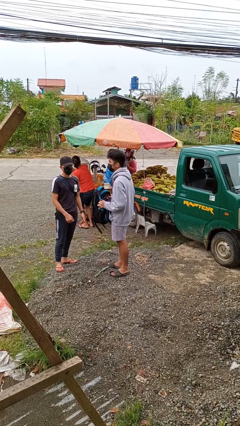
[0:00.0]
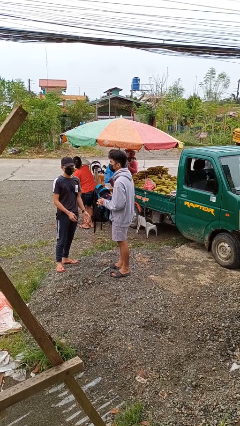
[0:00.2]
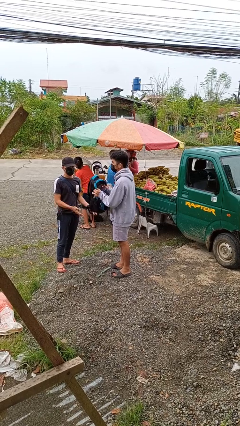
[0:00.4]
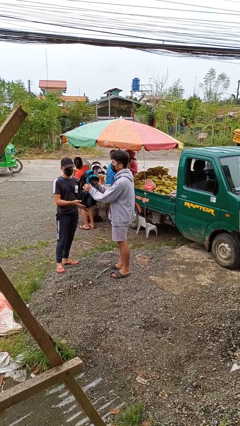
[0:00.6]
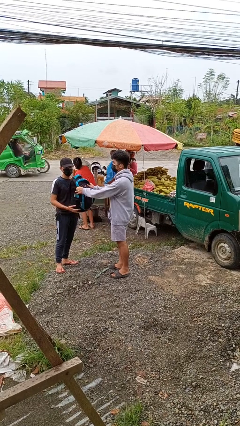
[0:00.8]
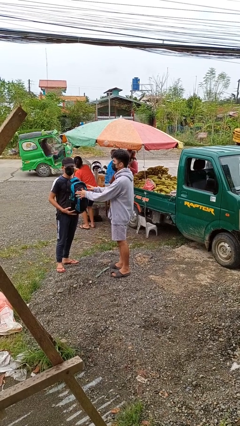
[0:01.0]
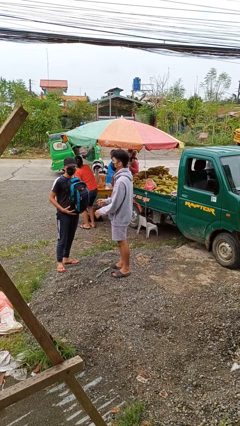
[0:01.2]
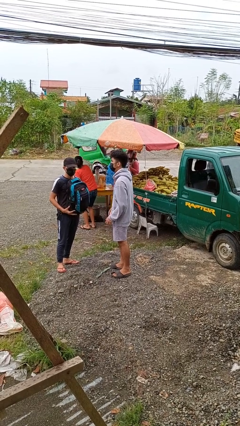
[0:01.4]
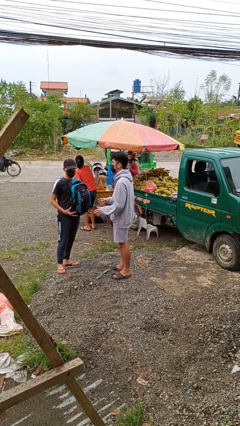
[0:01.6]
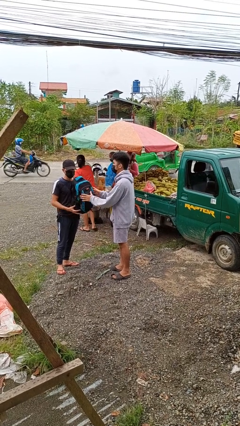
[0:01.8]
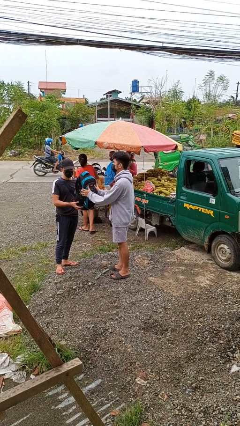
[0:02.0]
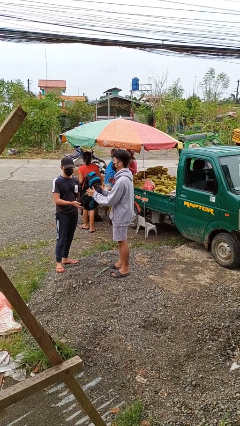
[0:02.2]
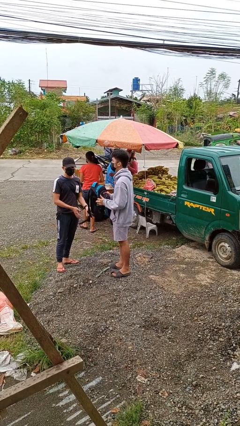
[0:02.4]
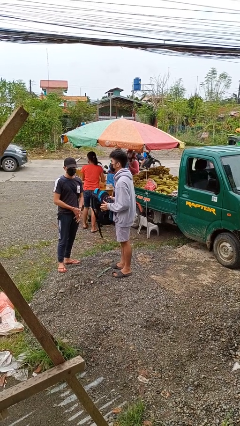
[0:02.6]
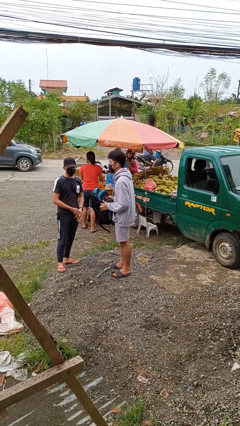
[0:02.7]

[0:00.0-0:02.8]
person transfers object to person

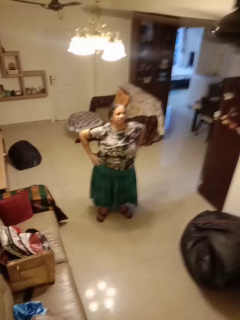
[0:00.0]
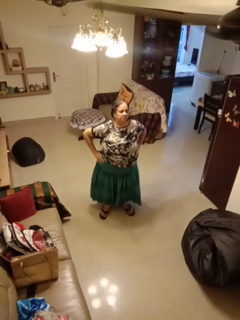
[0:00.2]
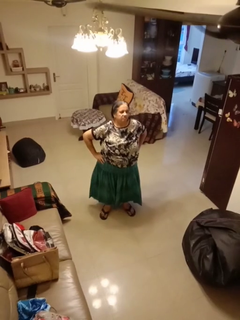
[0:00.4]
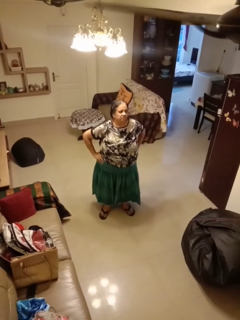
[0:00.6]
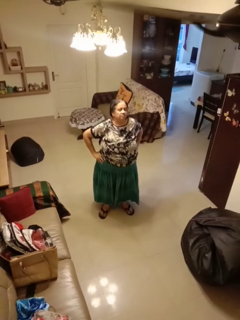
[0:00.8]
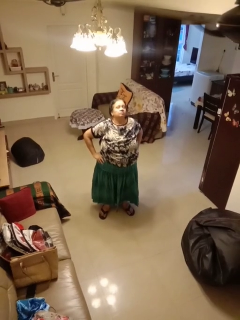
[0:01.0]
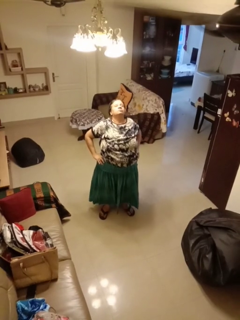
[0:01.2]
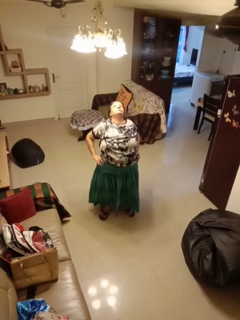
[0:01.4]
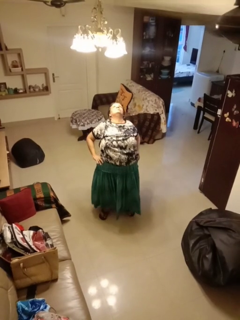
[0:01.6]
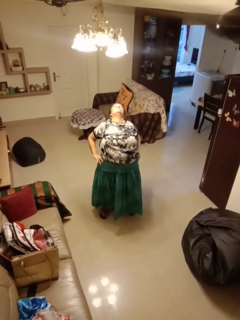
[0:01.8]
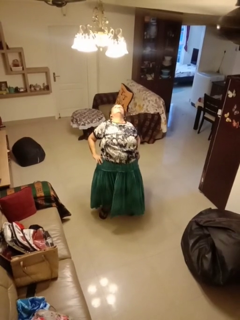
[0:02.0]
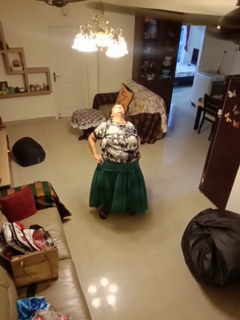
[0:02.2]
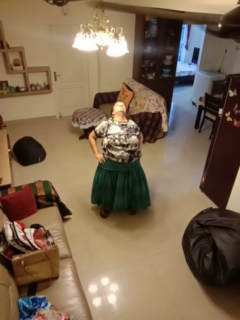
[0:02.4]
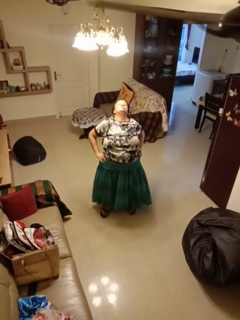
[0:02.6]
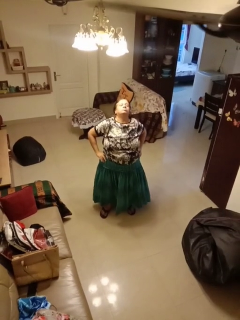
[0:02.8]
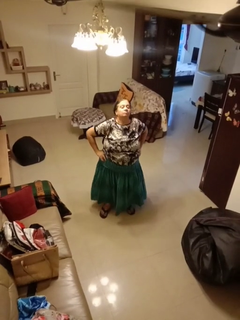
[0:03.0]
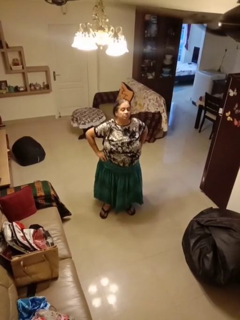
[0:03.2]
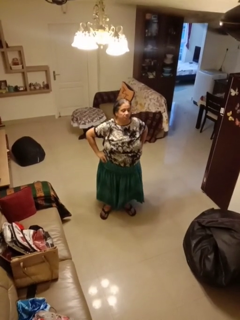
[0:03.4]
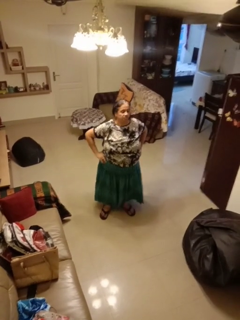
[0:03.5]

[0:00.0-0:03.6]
person stretches back

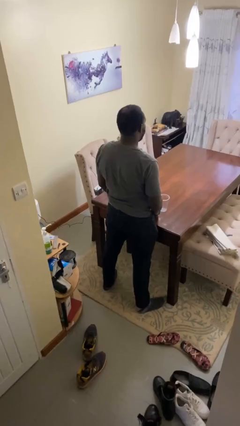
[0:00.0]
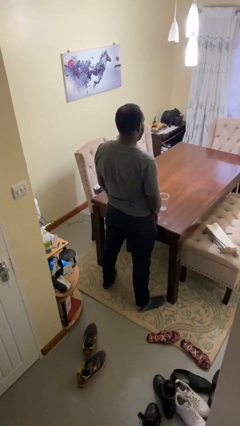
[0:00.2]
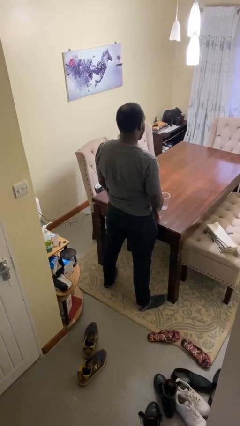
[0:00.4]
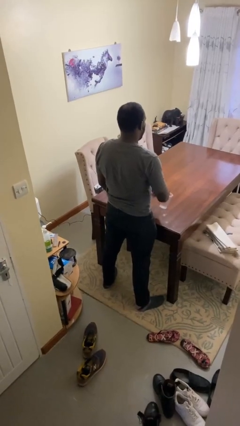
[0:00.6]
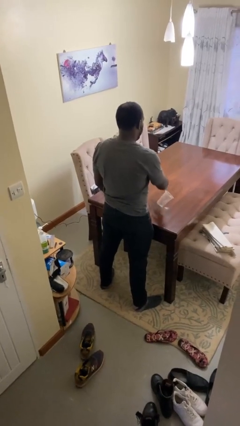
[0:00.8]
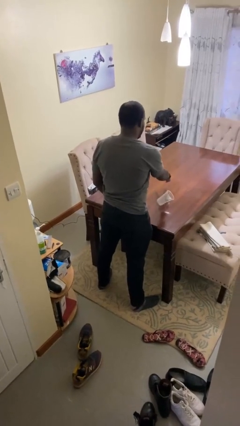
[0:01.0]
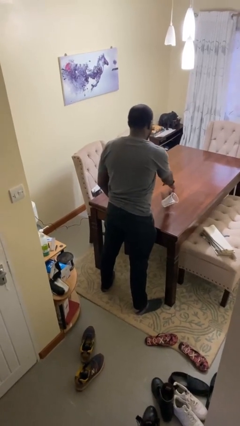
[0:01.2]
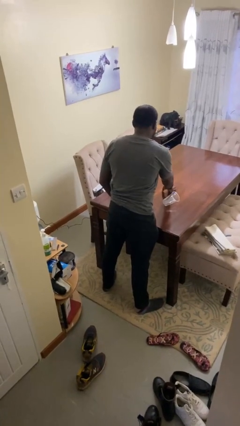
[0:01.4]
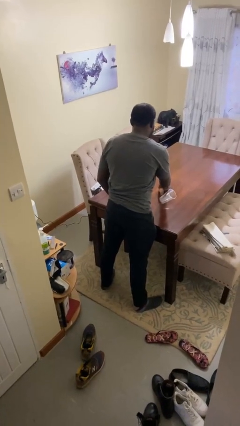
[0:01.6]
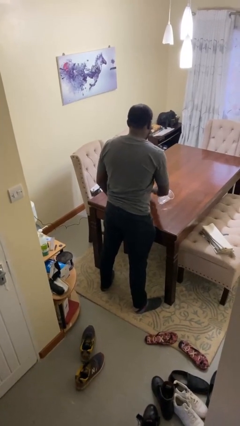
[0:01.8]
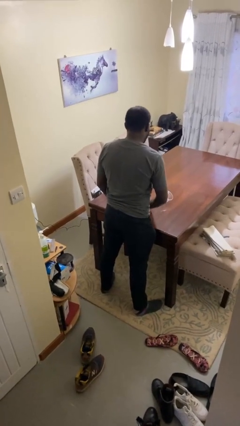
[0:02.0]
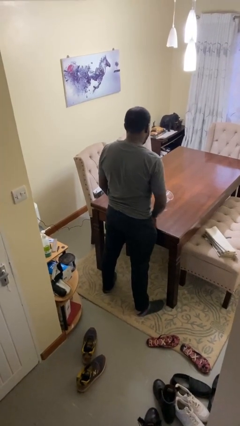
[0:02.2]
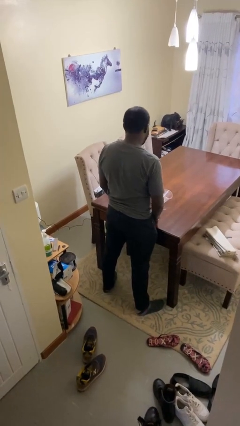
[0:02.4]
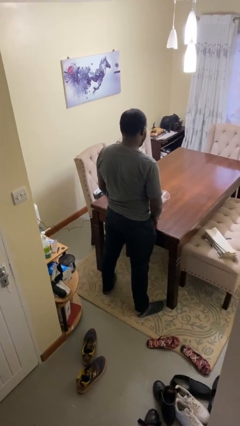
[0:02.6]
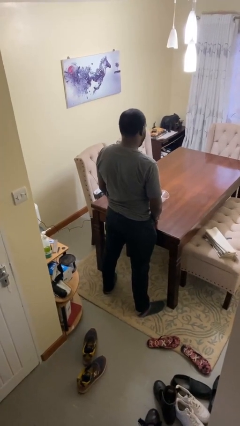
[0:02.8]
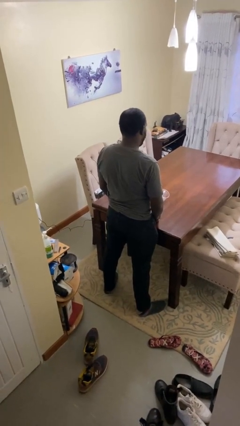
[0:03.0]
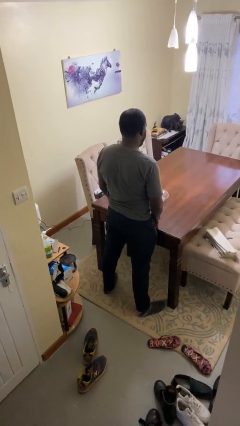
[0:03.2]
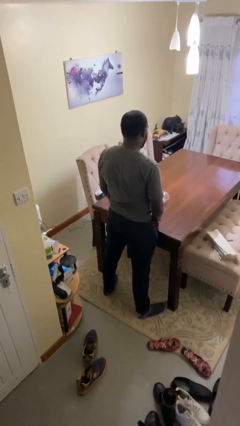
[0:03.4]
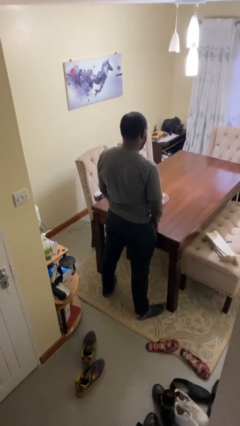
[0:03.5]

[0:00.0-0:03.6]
person knocks over glass

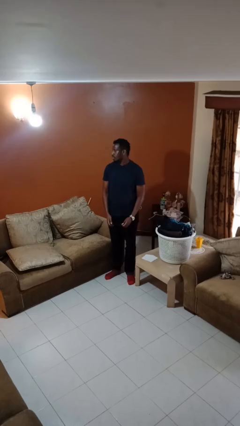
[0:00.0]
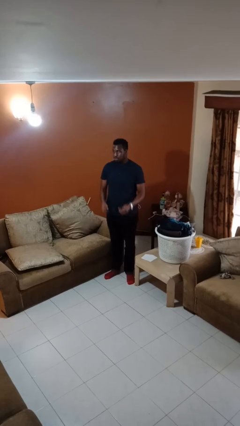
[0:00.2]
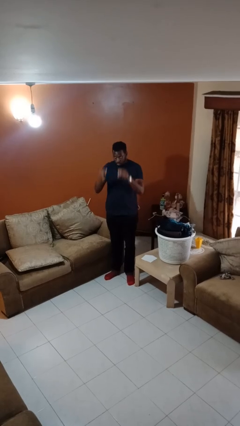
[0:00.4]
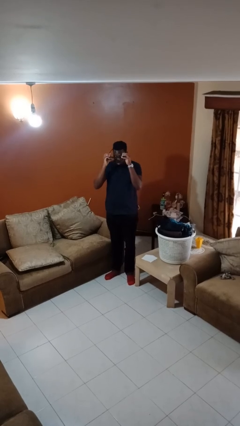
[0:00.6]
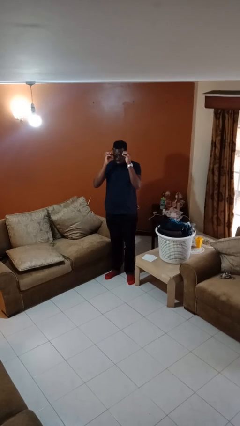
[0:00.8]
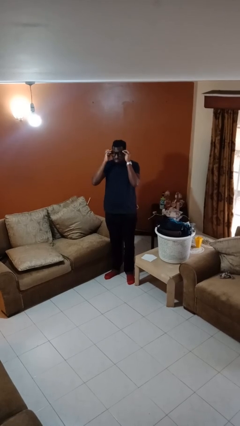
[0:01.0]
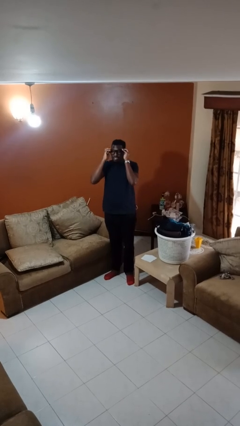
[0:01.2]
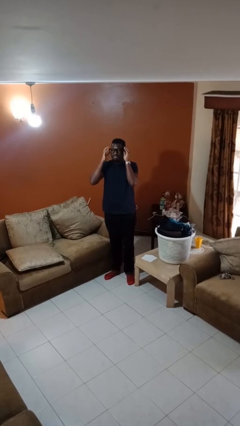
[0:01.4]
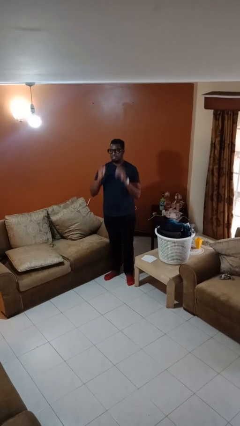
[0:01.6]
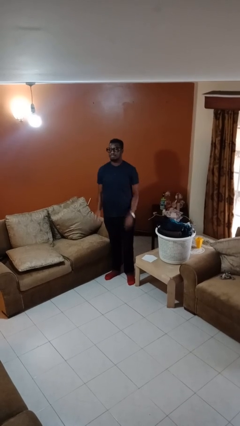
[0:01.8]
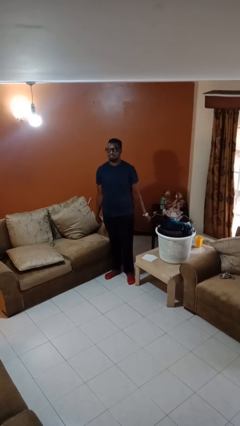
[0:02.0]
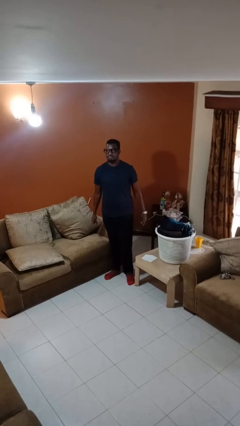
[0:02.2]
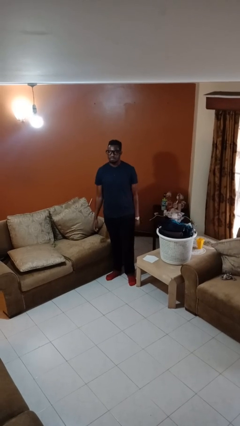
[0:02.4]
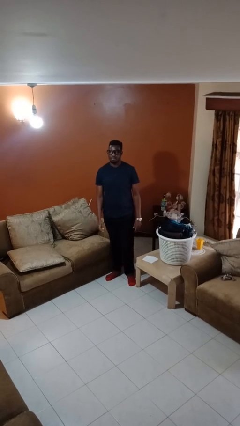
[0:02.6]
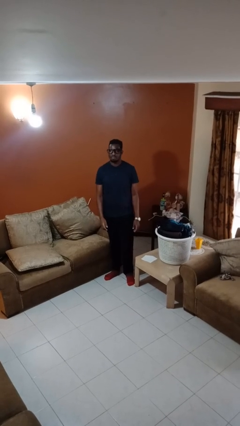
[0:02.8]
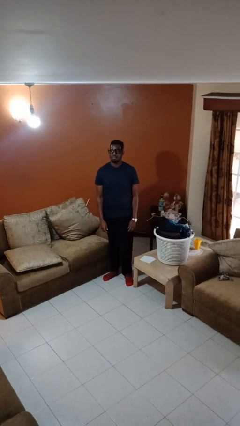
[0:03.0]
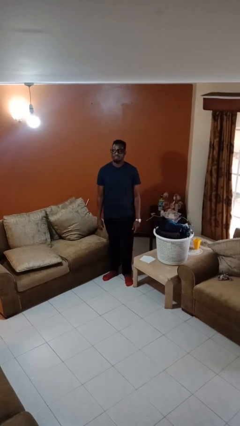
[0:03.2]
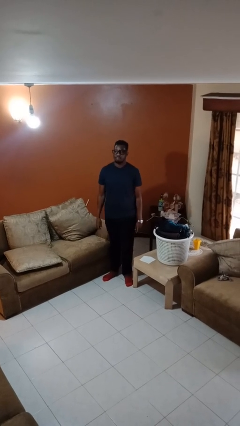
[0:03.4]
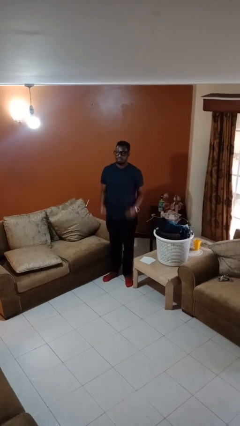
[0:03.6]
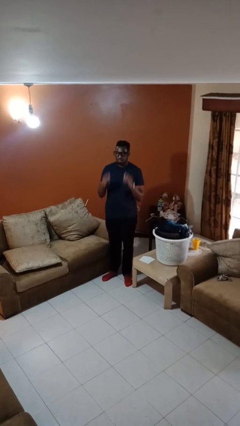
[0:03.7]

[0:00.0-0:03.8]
person puts on glasses

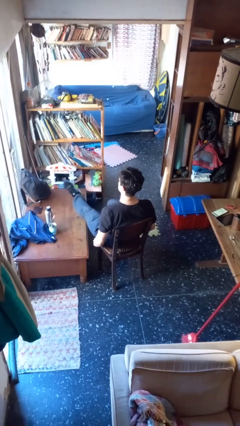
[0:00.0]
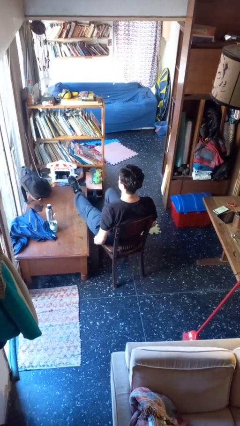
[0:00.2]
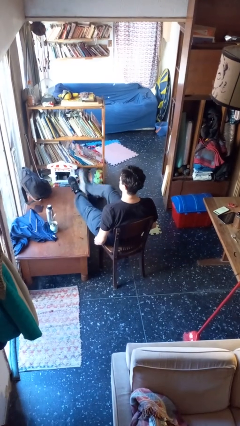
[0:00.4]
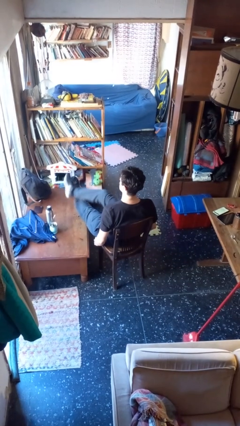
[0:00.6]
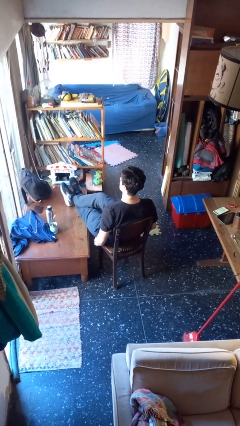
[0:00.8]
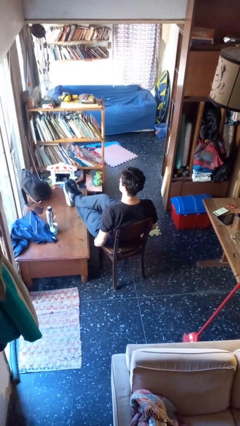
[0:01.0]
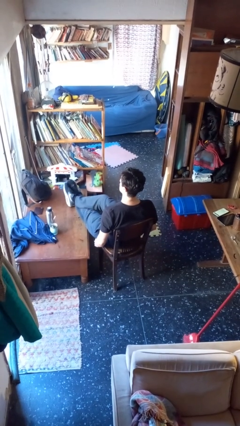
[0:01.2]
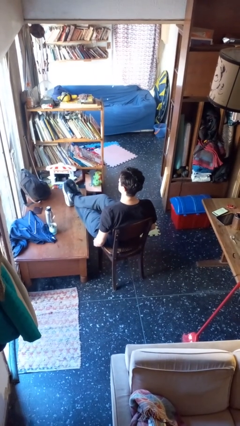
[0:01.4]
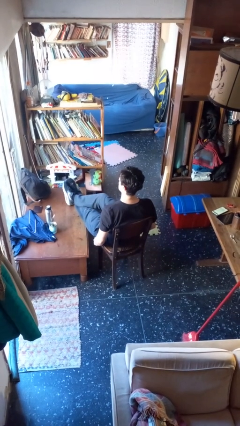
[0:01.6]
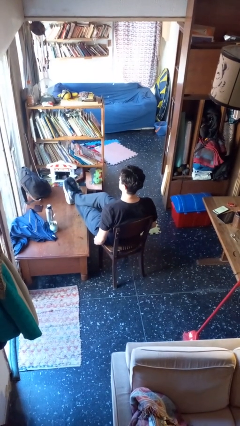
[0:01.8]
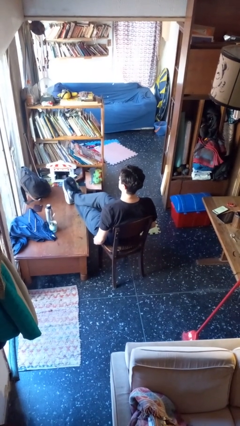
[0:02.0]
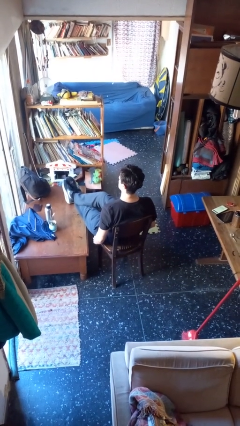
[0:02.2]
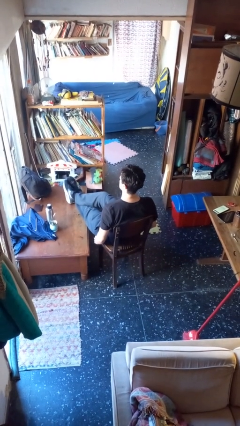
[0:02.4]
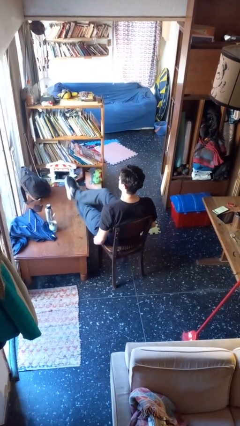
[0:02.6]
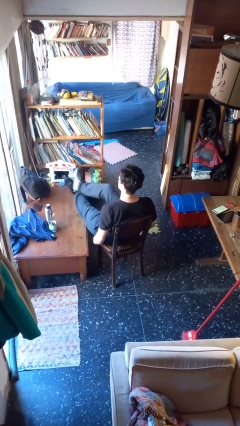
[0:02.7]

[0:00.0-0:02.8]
person puts feet up

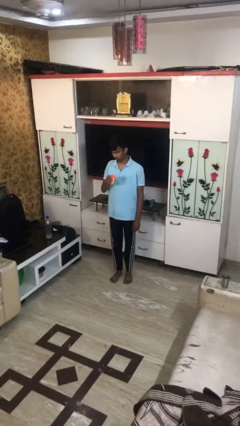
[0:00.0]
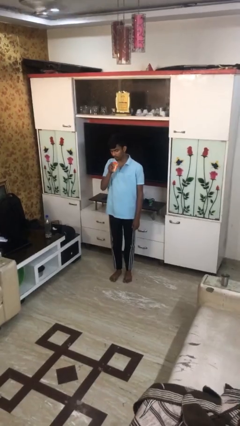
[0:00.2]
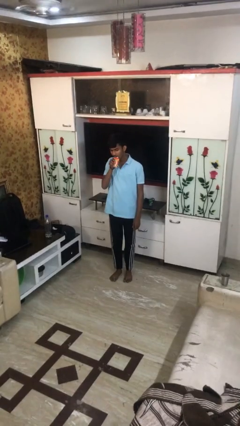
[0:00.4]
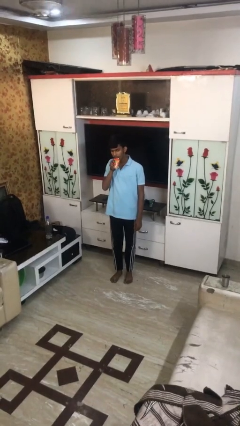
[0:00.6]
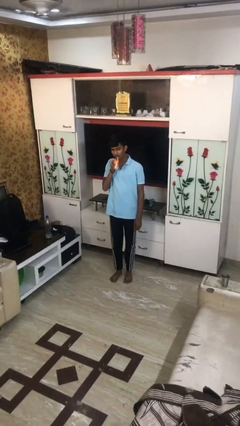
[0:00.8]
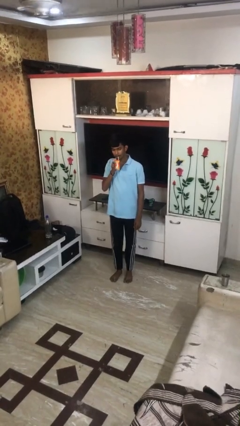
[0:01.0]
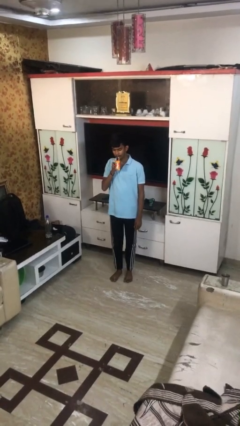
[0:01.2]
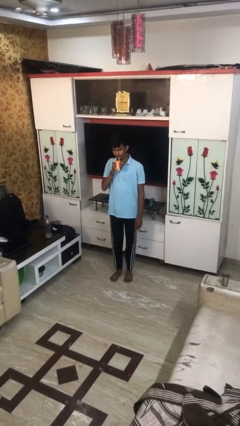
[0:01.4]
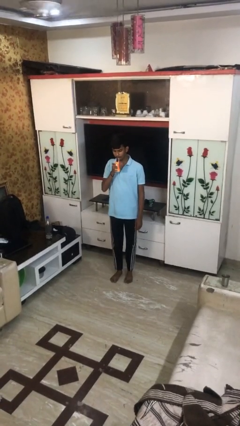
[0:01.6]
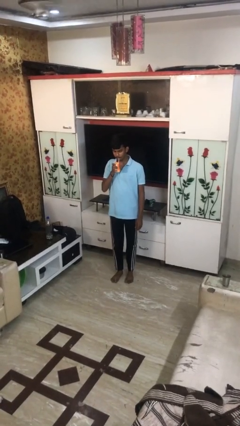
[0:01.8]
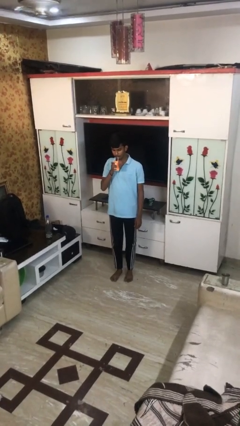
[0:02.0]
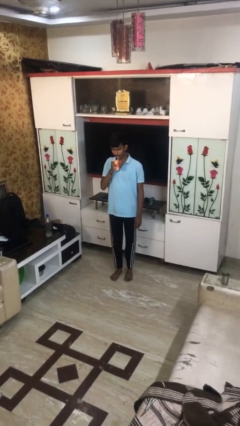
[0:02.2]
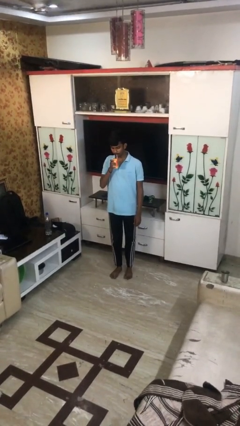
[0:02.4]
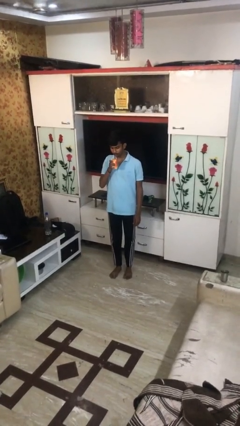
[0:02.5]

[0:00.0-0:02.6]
person drinks from straw
